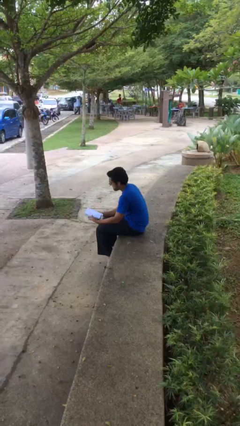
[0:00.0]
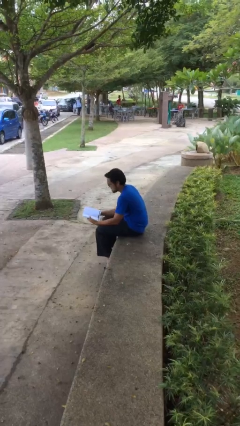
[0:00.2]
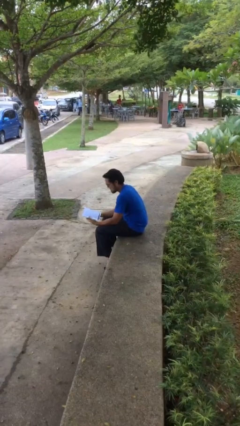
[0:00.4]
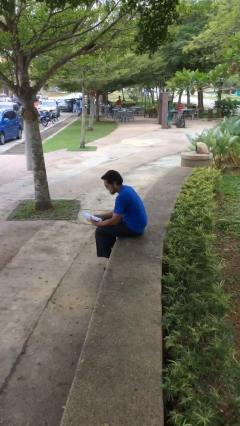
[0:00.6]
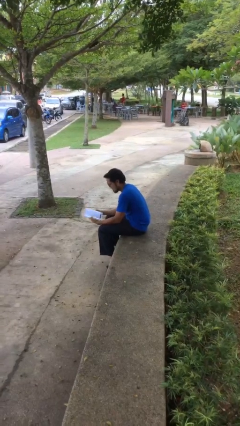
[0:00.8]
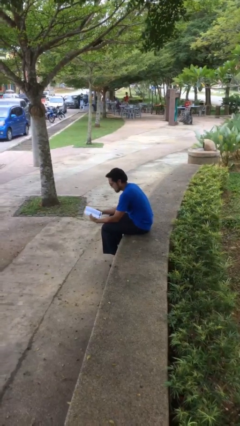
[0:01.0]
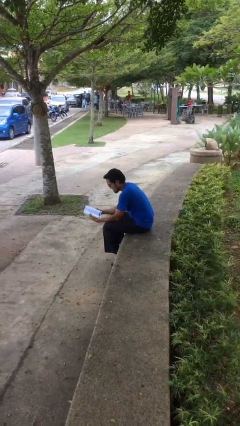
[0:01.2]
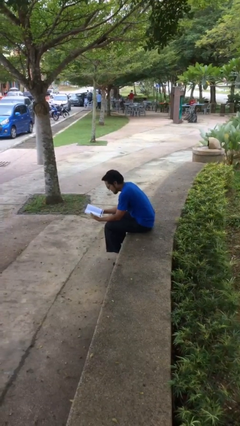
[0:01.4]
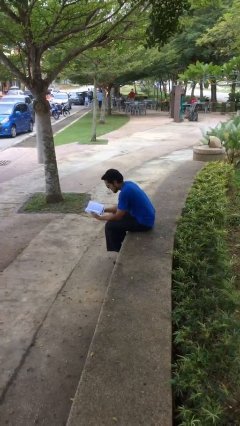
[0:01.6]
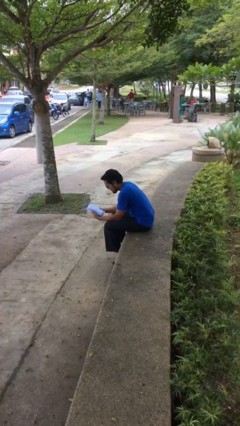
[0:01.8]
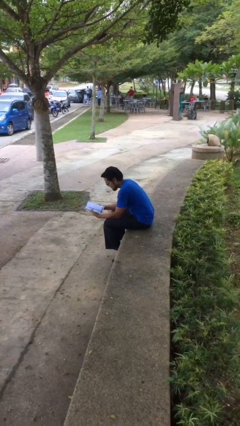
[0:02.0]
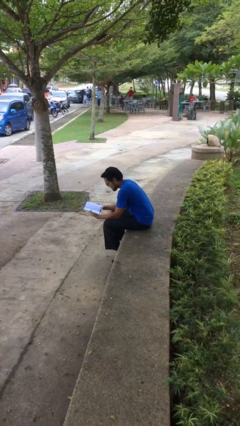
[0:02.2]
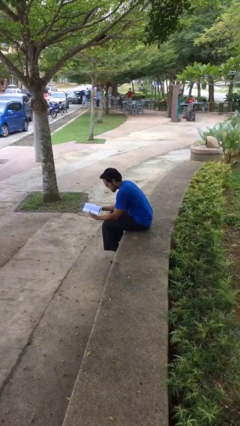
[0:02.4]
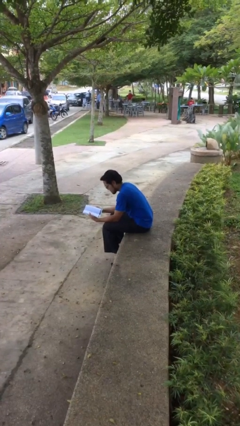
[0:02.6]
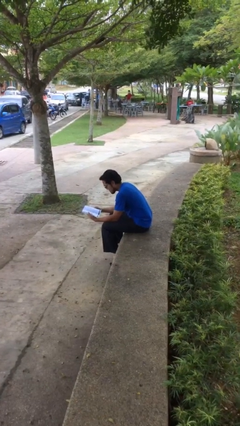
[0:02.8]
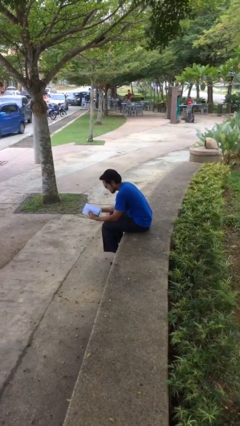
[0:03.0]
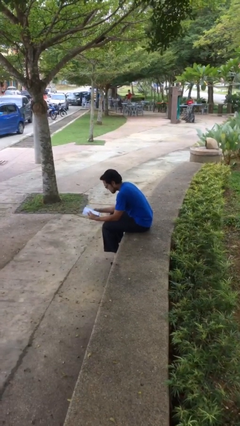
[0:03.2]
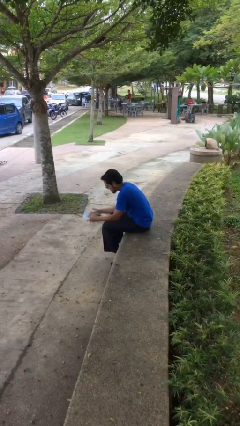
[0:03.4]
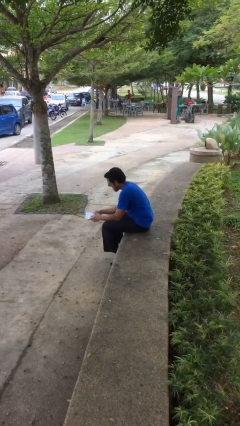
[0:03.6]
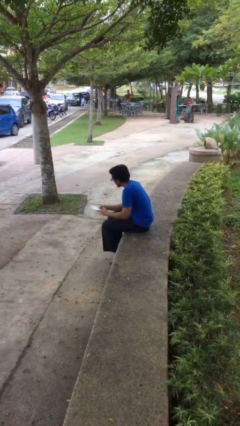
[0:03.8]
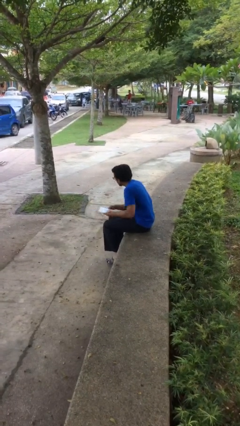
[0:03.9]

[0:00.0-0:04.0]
person reads document

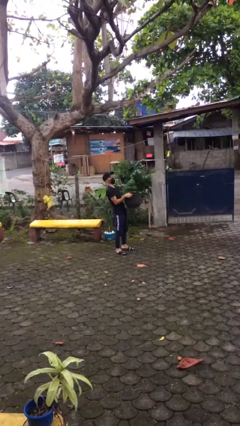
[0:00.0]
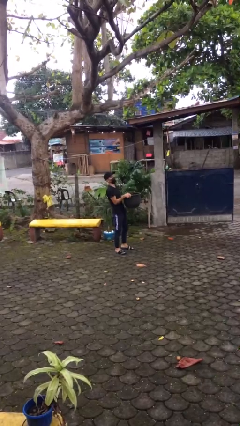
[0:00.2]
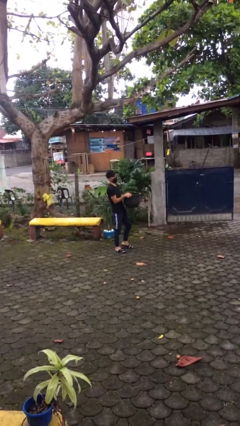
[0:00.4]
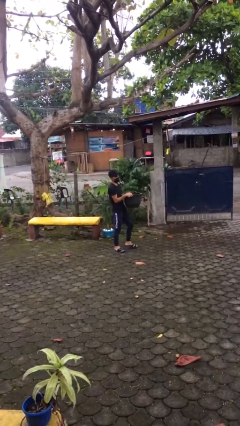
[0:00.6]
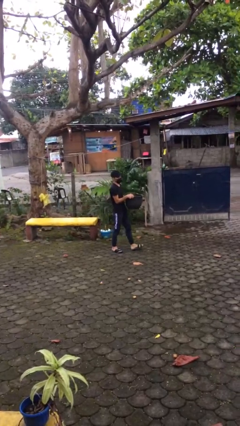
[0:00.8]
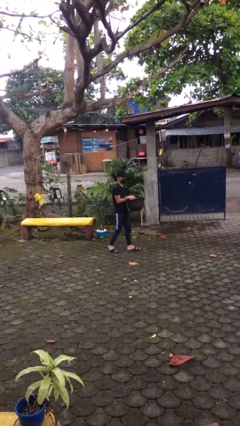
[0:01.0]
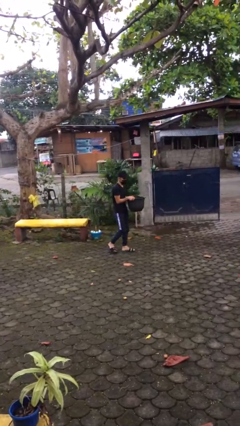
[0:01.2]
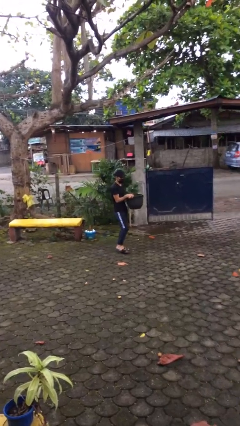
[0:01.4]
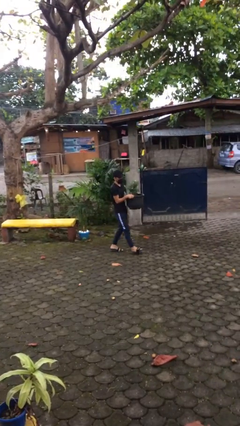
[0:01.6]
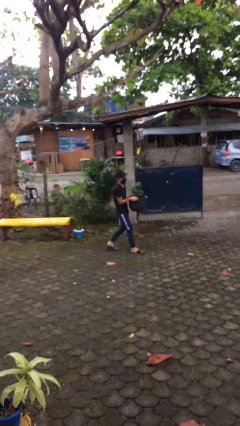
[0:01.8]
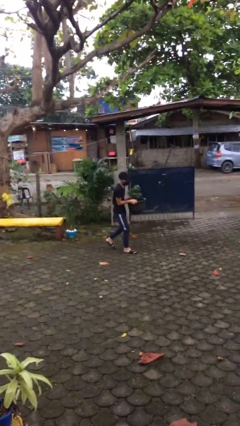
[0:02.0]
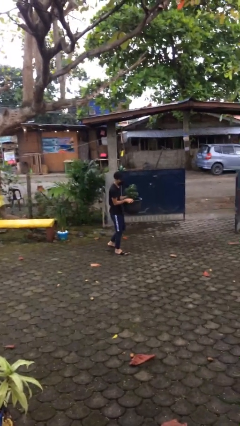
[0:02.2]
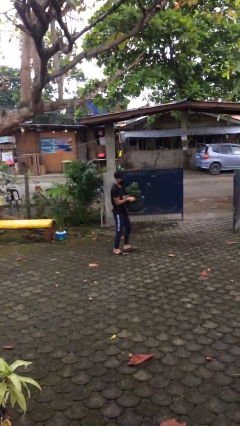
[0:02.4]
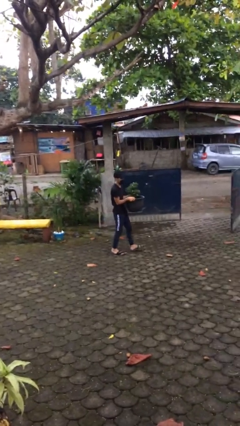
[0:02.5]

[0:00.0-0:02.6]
person carries heavy object

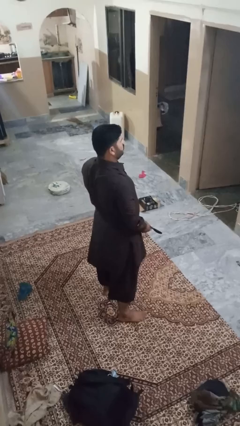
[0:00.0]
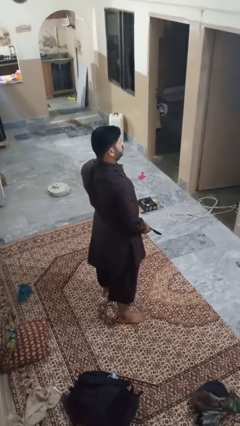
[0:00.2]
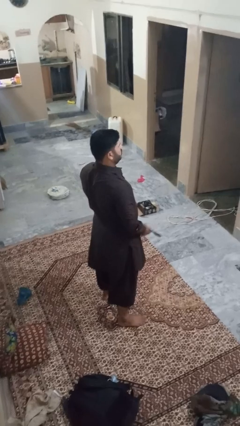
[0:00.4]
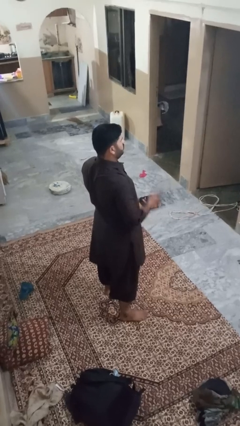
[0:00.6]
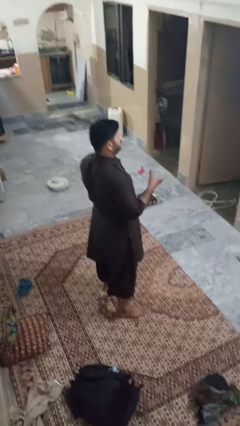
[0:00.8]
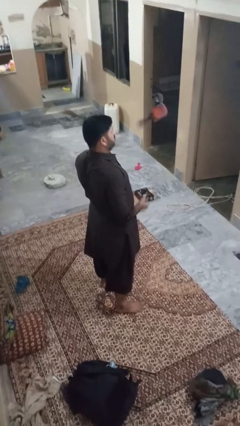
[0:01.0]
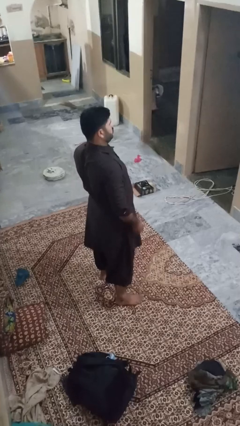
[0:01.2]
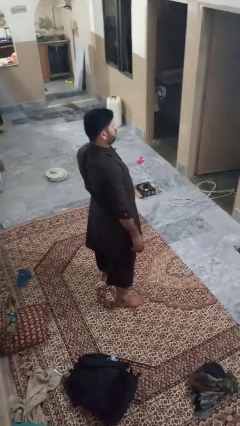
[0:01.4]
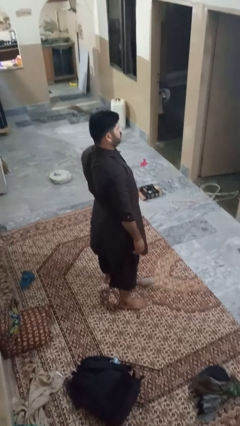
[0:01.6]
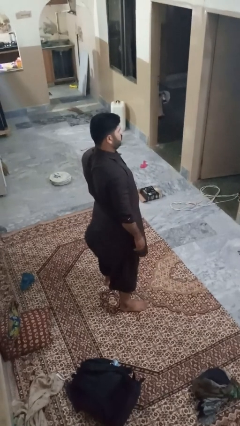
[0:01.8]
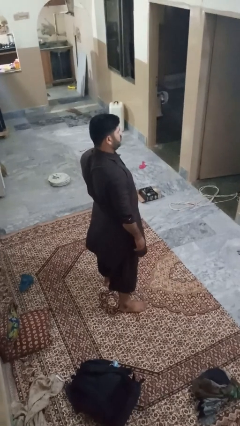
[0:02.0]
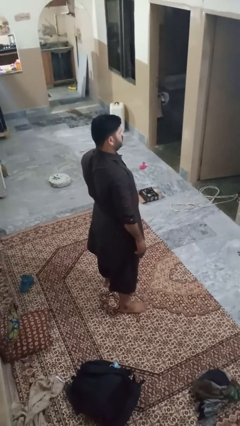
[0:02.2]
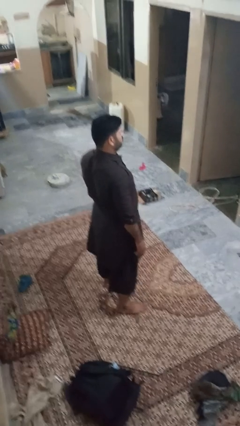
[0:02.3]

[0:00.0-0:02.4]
person throws object into air

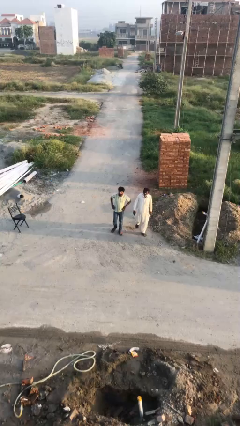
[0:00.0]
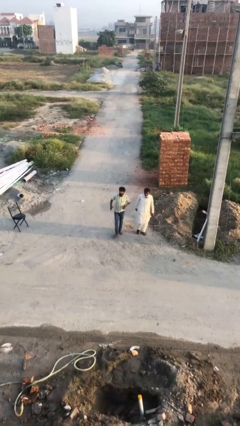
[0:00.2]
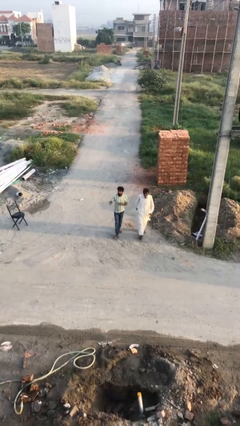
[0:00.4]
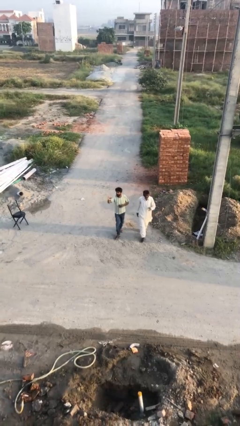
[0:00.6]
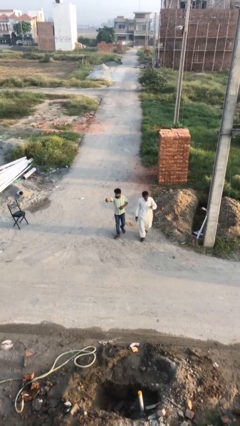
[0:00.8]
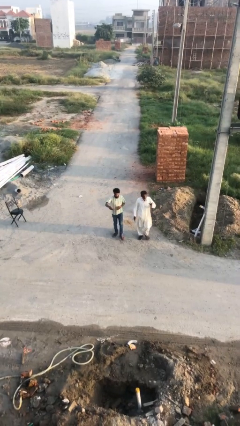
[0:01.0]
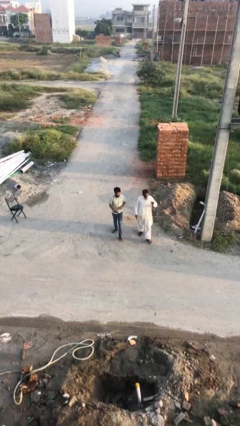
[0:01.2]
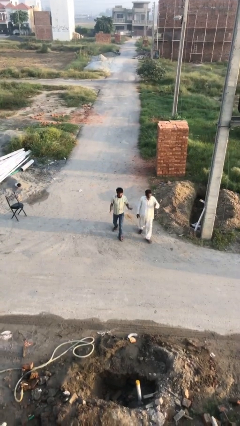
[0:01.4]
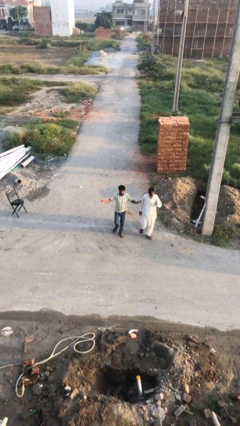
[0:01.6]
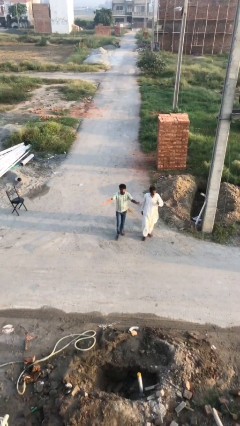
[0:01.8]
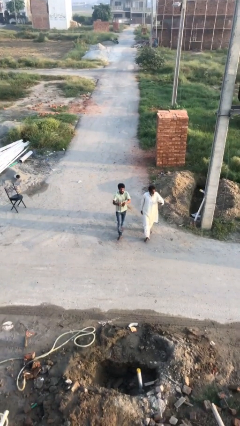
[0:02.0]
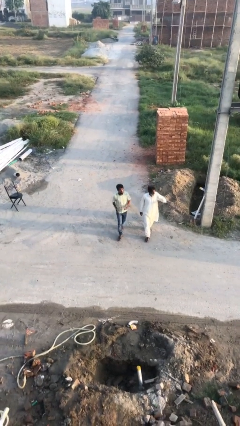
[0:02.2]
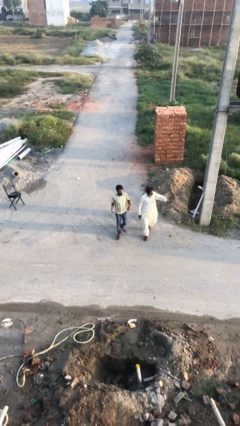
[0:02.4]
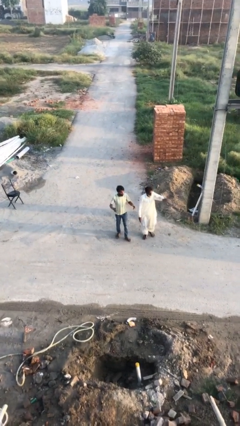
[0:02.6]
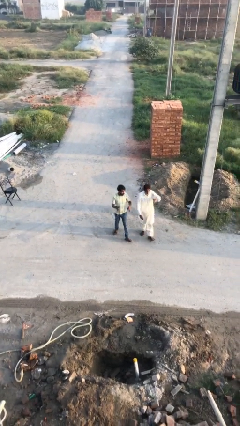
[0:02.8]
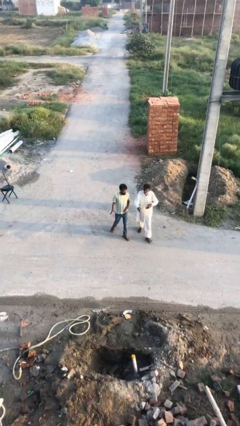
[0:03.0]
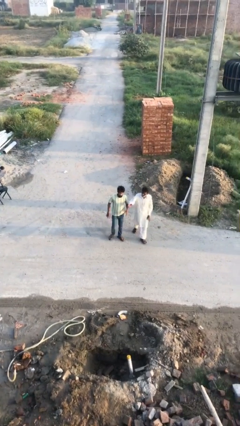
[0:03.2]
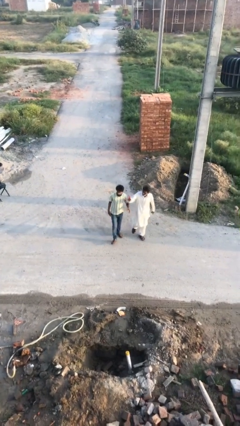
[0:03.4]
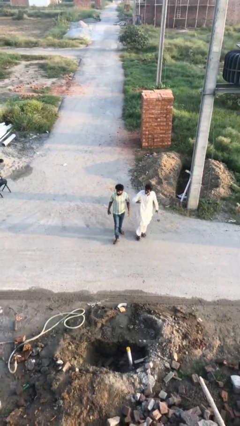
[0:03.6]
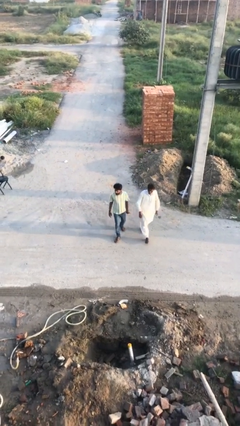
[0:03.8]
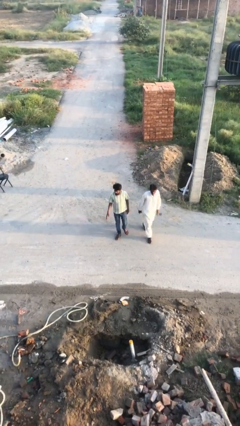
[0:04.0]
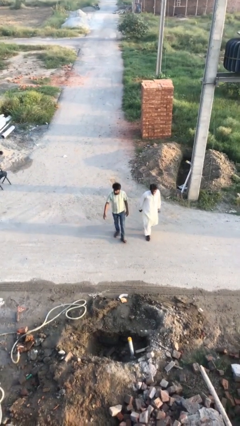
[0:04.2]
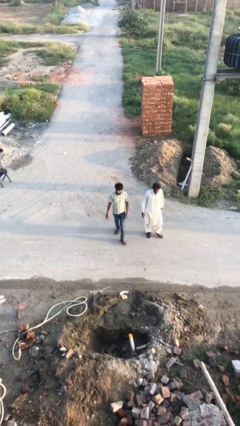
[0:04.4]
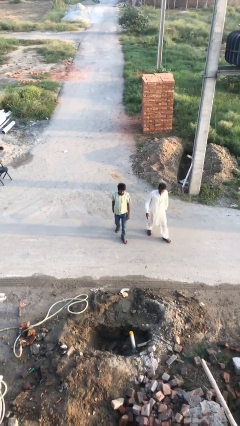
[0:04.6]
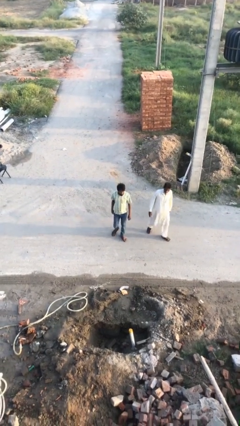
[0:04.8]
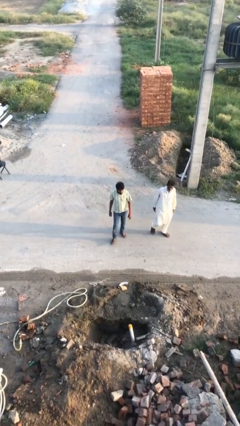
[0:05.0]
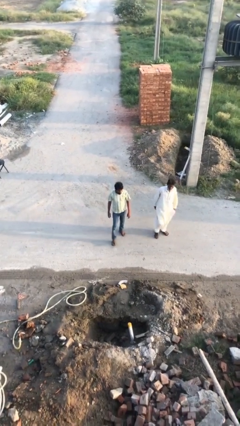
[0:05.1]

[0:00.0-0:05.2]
person talks to person

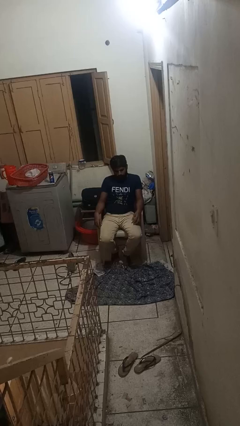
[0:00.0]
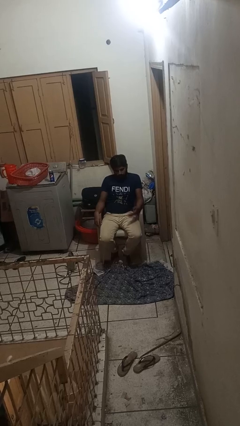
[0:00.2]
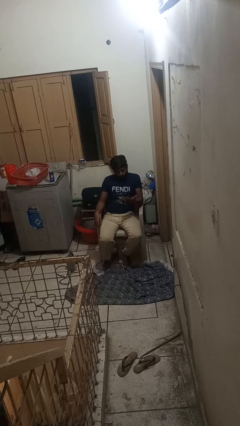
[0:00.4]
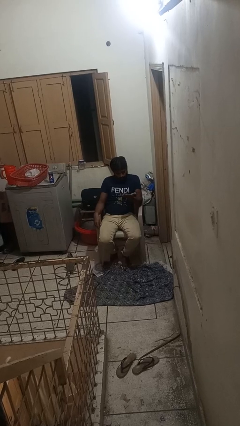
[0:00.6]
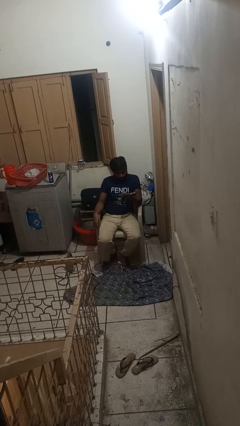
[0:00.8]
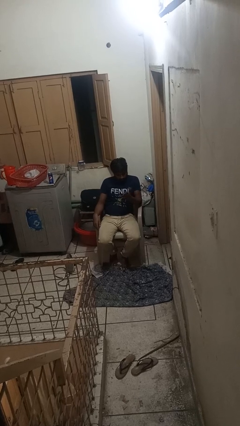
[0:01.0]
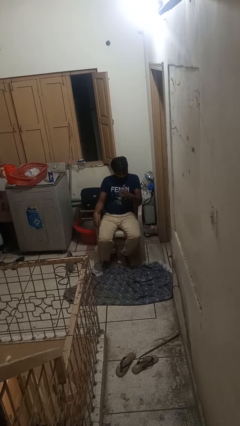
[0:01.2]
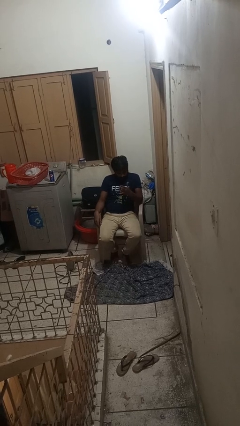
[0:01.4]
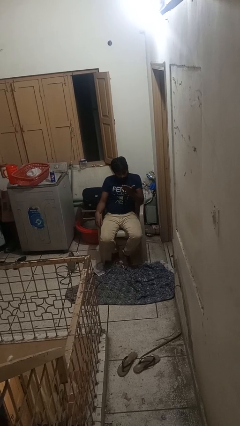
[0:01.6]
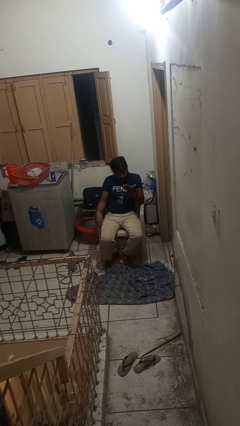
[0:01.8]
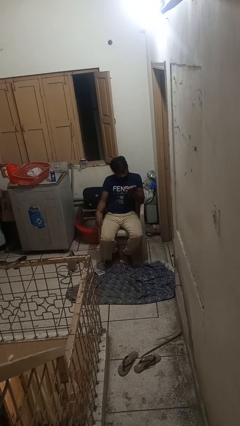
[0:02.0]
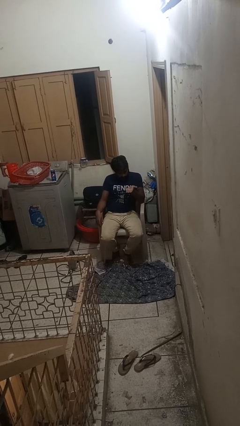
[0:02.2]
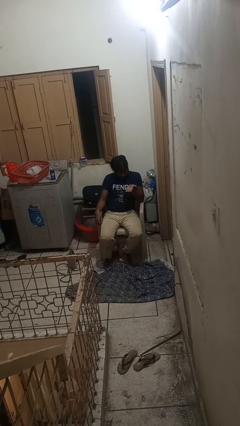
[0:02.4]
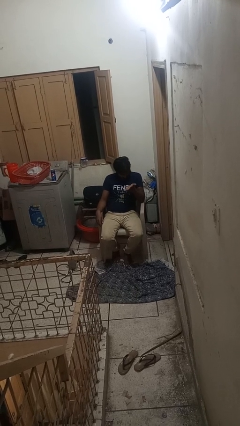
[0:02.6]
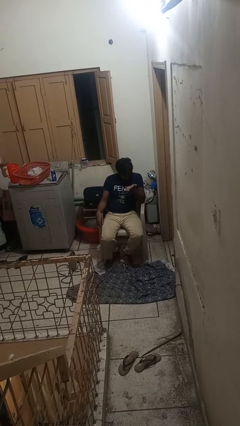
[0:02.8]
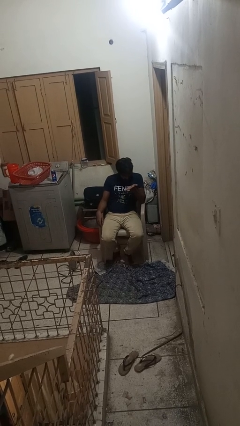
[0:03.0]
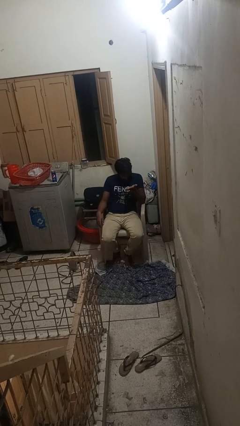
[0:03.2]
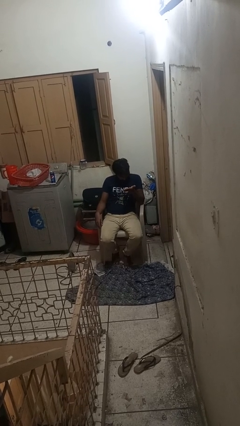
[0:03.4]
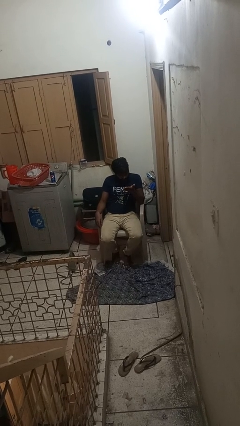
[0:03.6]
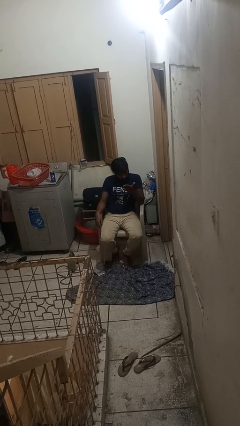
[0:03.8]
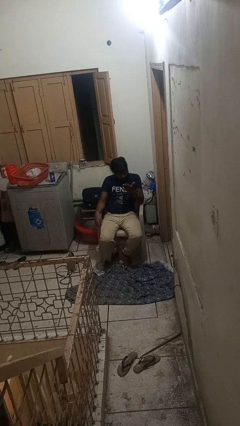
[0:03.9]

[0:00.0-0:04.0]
person looks at hands in lap
